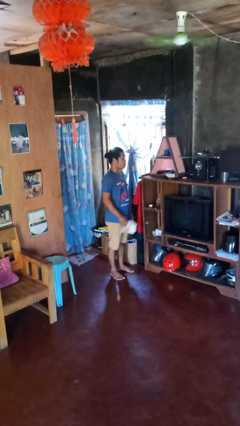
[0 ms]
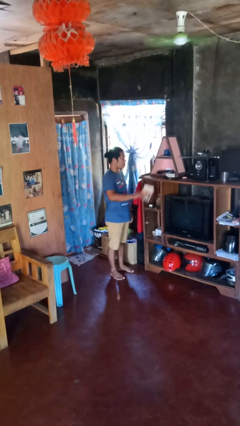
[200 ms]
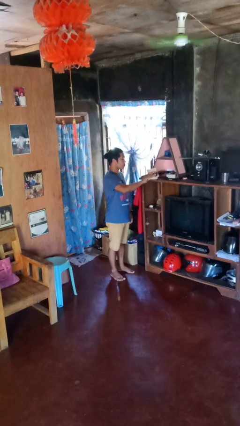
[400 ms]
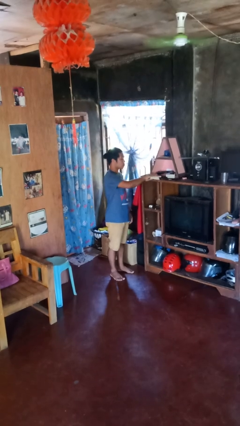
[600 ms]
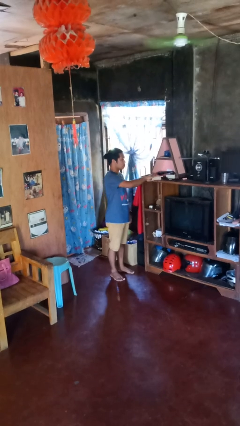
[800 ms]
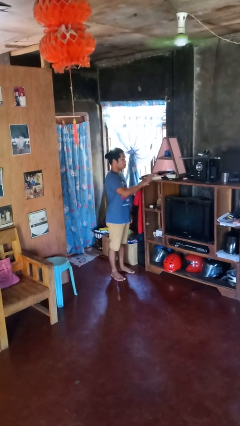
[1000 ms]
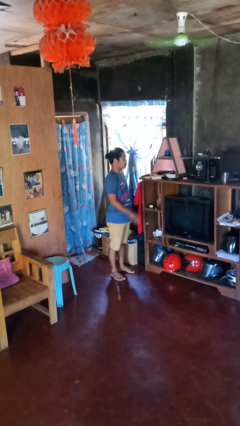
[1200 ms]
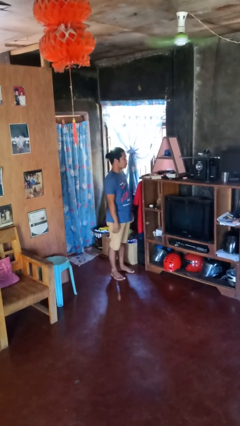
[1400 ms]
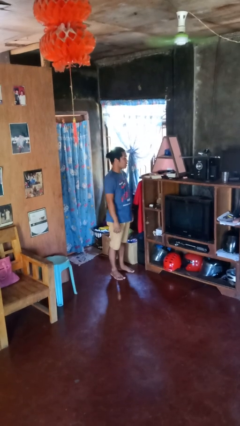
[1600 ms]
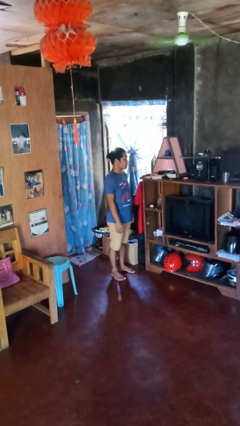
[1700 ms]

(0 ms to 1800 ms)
person puts down object on shelf

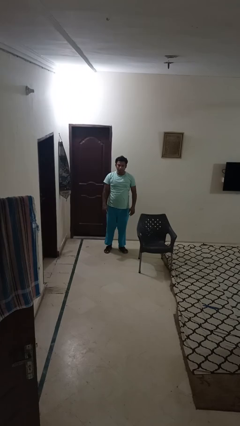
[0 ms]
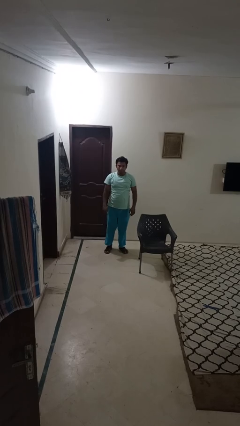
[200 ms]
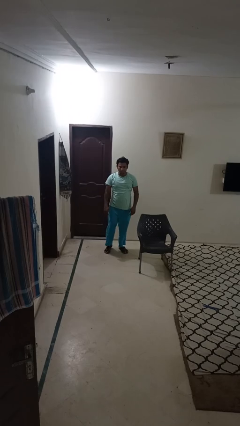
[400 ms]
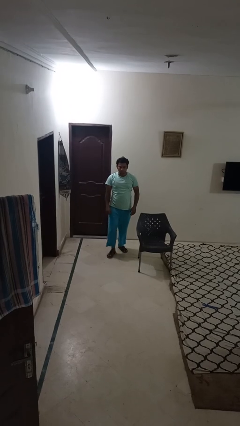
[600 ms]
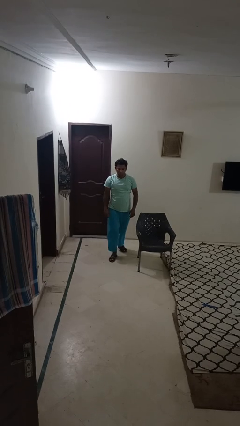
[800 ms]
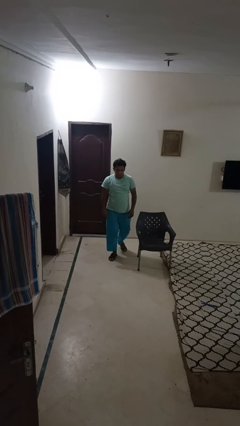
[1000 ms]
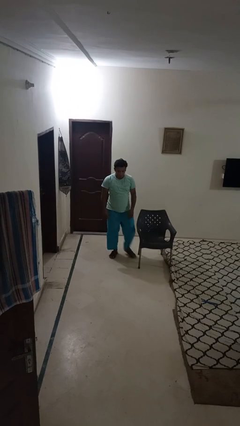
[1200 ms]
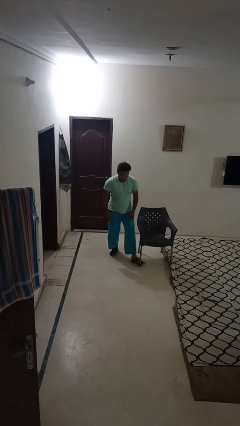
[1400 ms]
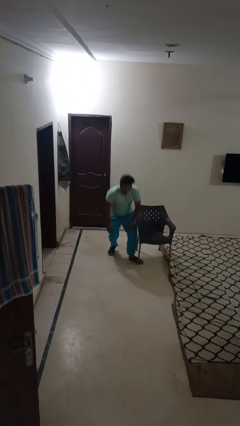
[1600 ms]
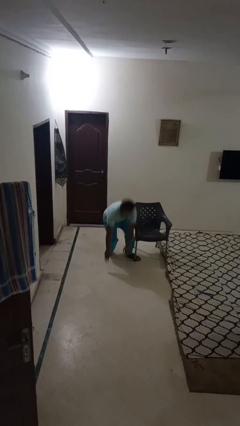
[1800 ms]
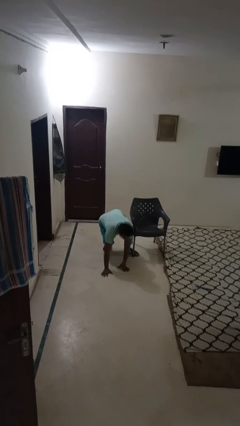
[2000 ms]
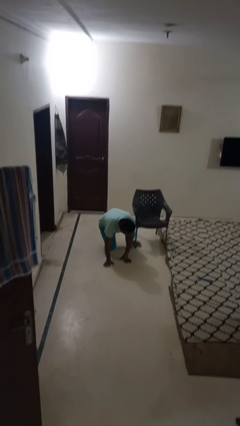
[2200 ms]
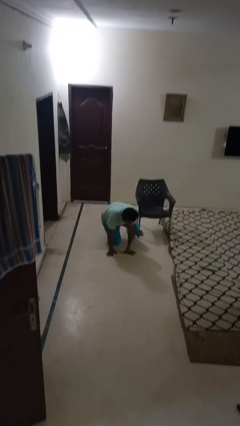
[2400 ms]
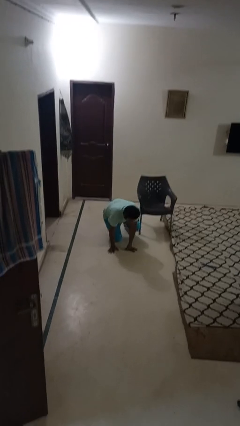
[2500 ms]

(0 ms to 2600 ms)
person trips on object on floor

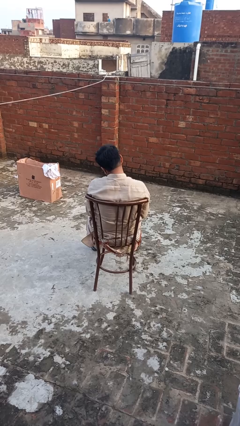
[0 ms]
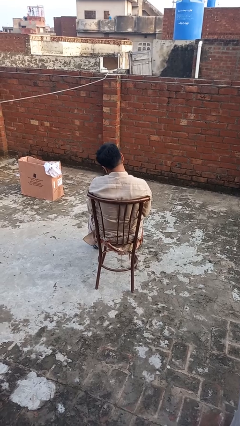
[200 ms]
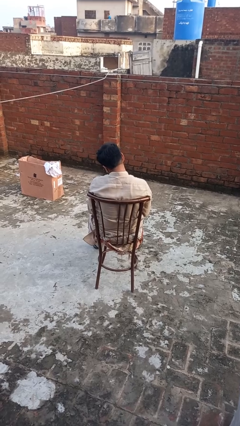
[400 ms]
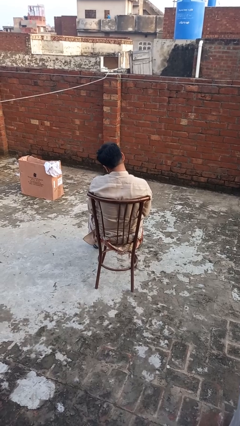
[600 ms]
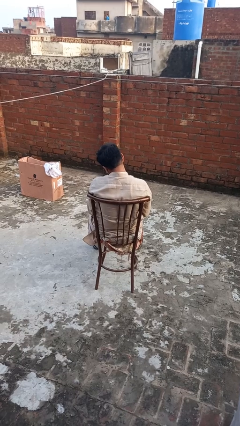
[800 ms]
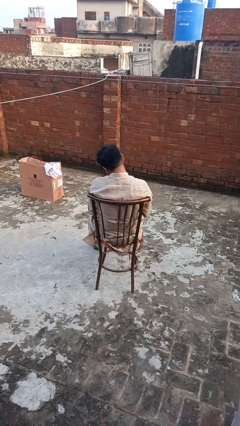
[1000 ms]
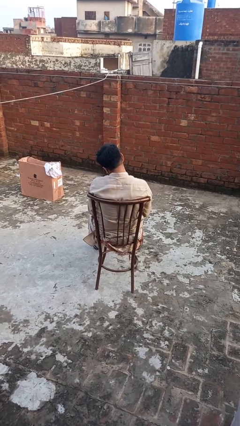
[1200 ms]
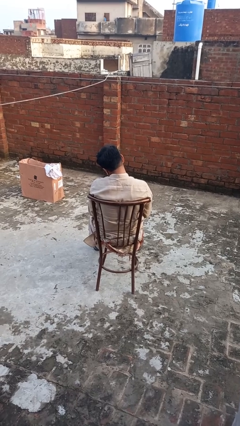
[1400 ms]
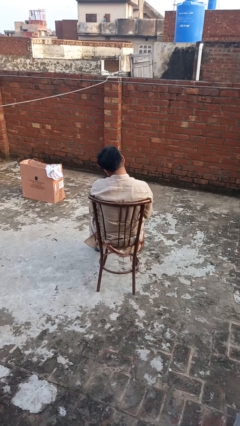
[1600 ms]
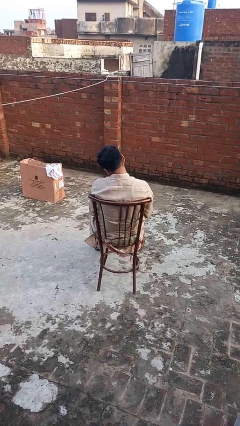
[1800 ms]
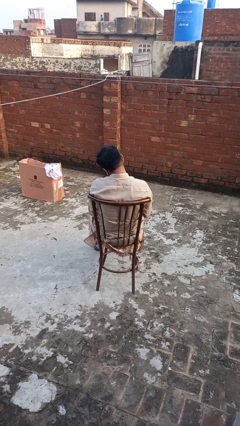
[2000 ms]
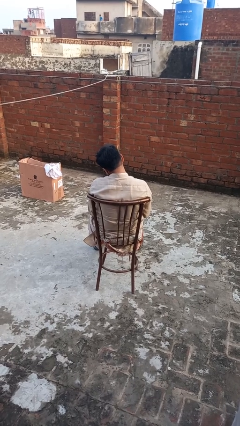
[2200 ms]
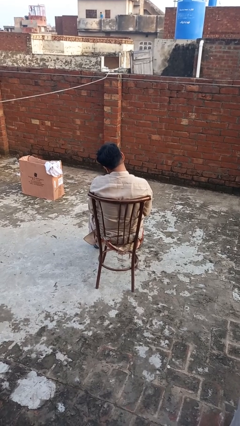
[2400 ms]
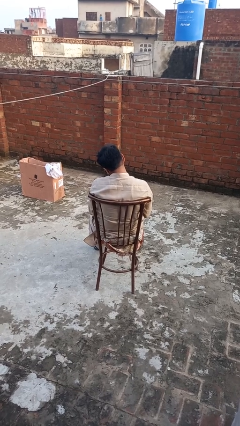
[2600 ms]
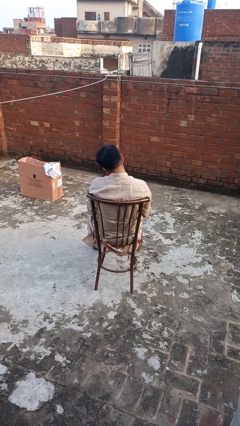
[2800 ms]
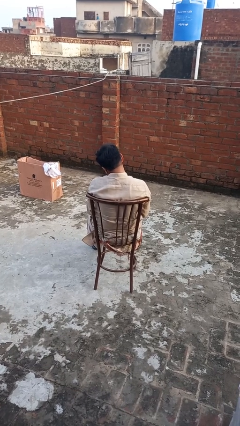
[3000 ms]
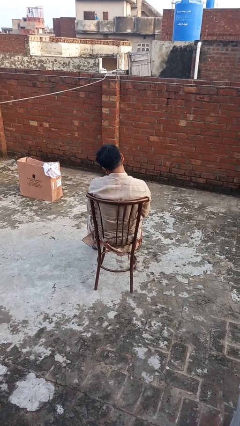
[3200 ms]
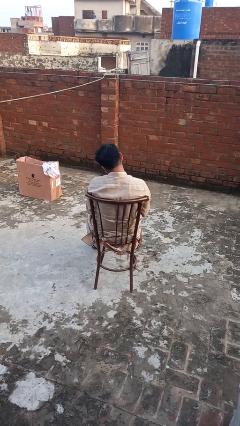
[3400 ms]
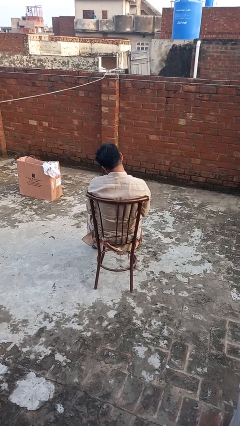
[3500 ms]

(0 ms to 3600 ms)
person stirs mug

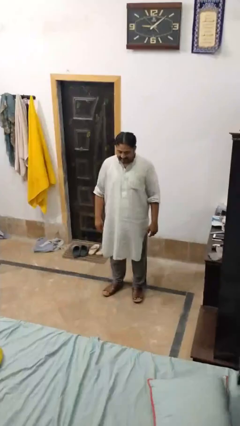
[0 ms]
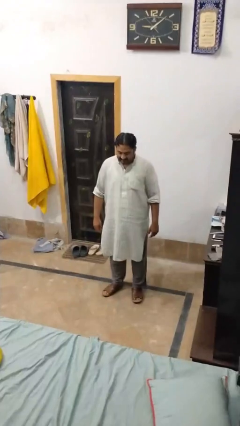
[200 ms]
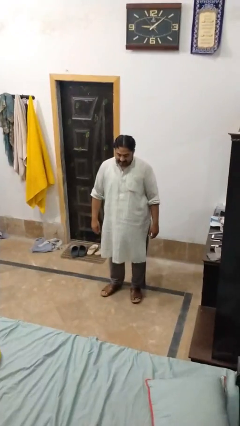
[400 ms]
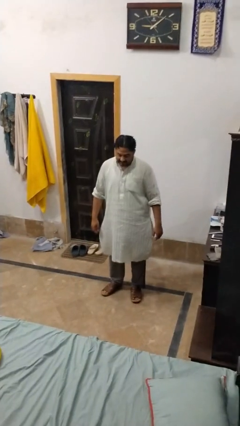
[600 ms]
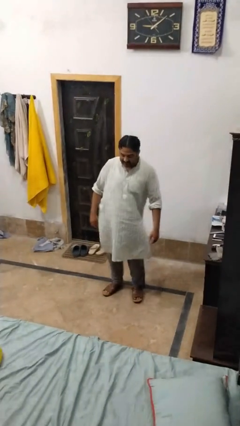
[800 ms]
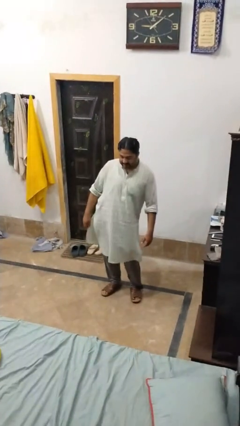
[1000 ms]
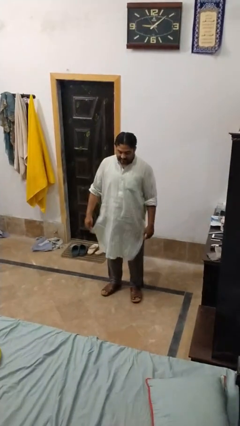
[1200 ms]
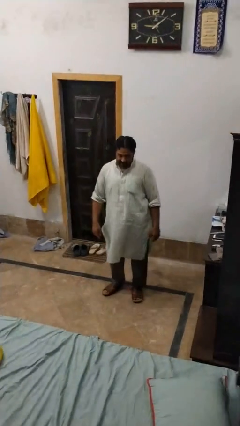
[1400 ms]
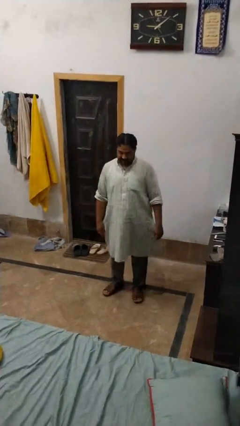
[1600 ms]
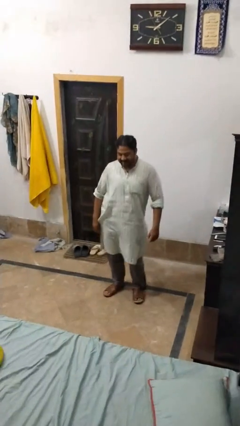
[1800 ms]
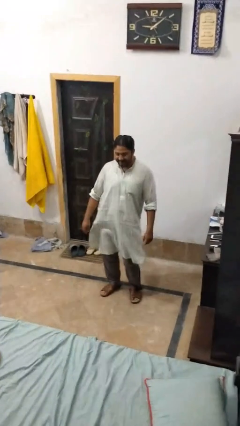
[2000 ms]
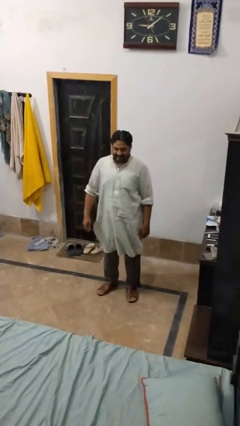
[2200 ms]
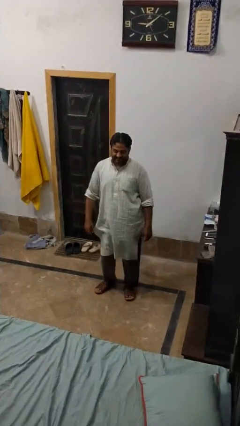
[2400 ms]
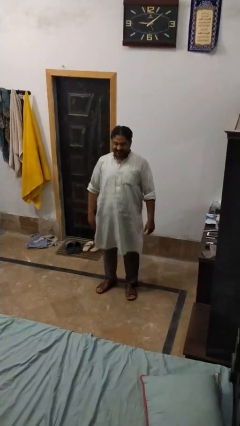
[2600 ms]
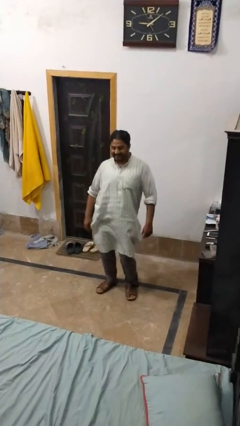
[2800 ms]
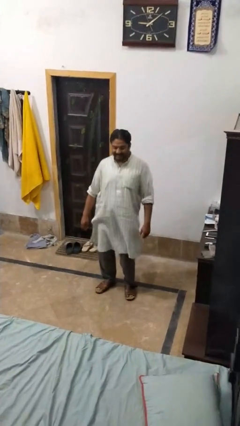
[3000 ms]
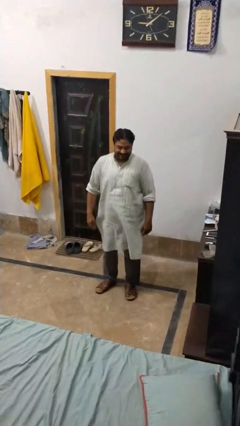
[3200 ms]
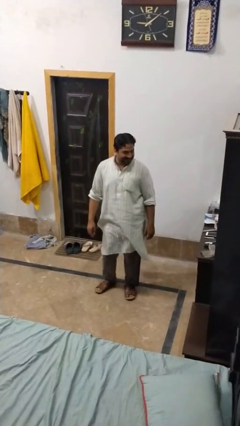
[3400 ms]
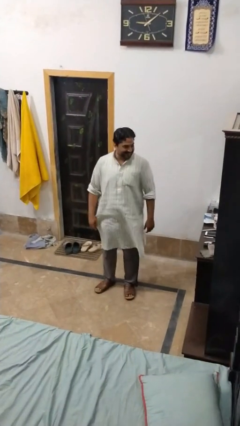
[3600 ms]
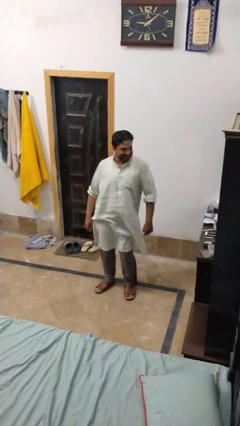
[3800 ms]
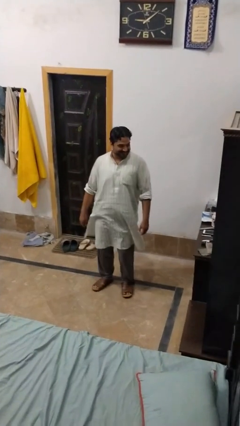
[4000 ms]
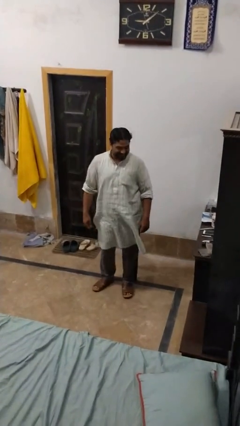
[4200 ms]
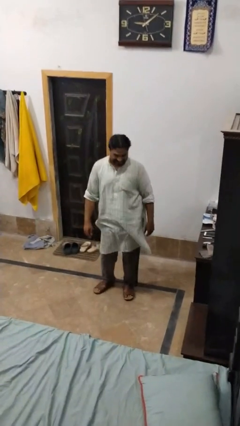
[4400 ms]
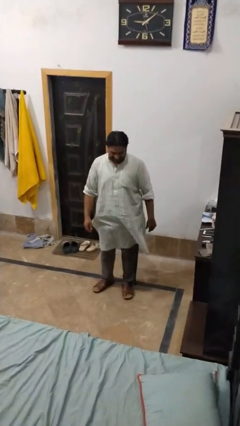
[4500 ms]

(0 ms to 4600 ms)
person wiggles hips

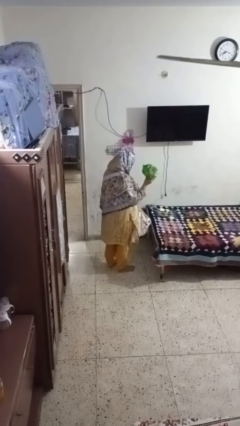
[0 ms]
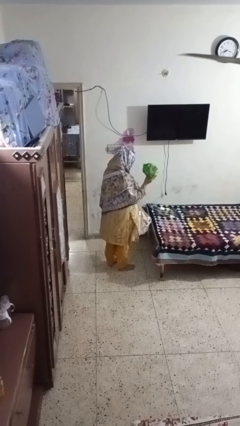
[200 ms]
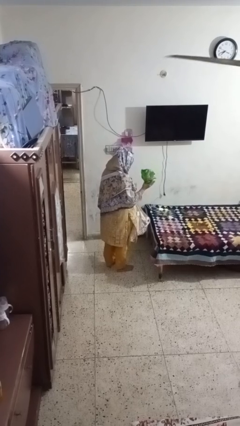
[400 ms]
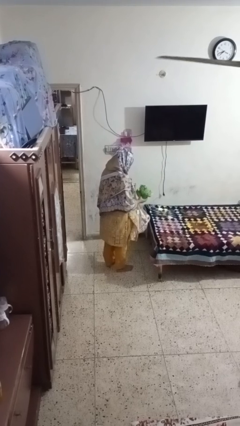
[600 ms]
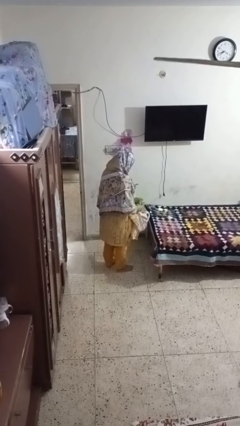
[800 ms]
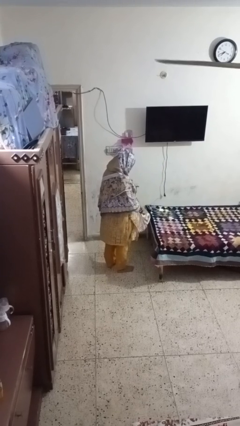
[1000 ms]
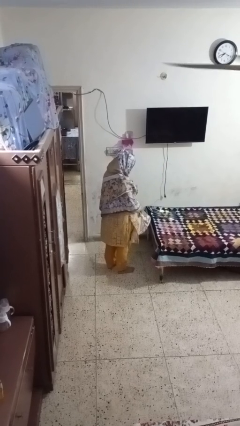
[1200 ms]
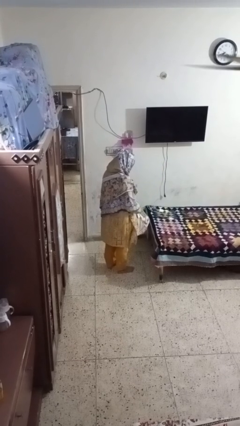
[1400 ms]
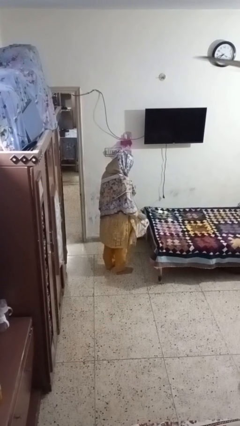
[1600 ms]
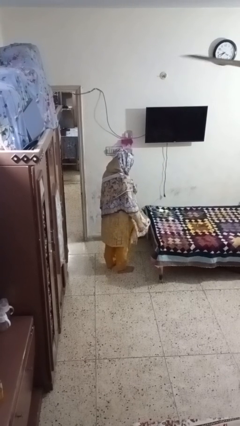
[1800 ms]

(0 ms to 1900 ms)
person puts object into bag

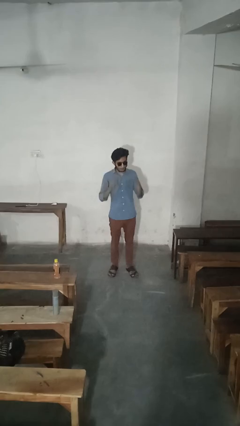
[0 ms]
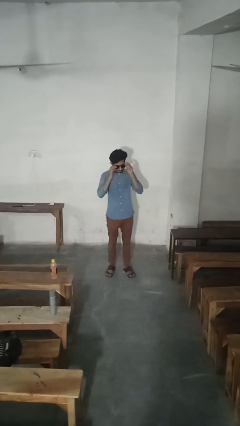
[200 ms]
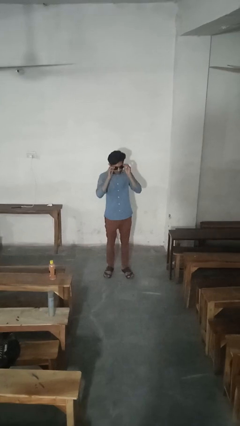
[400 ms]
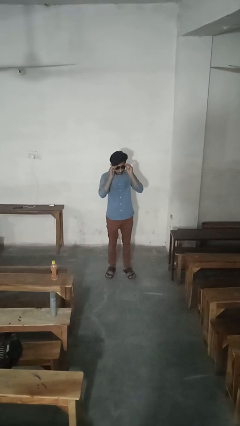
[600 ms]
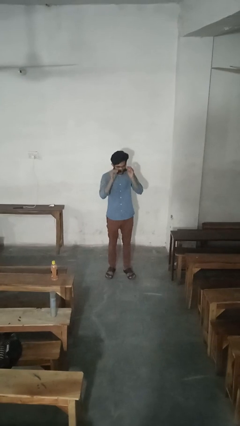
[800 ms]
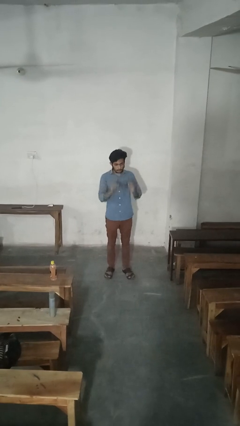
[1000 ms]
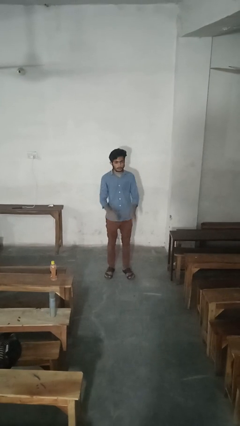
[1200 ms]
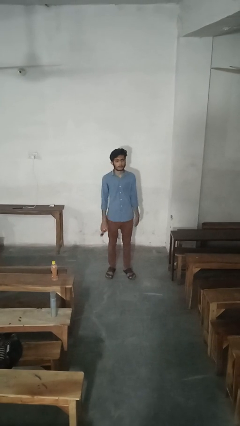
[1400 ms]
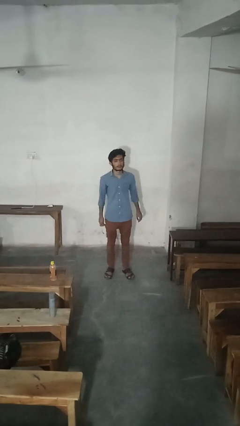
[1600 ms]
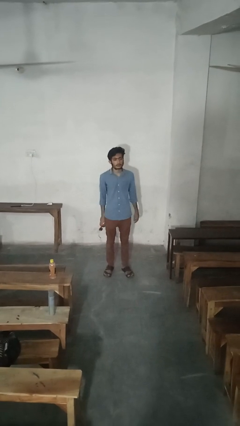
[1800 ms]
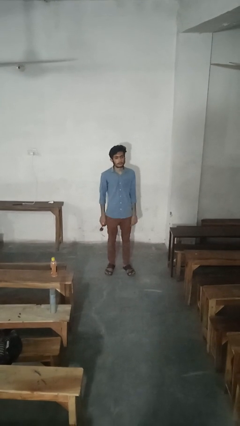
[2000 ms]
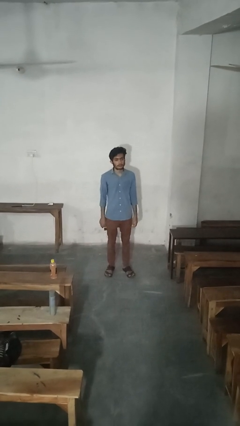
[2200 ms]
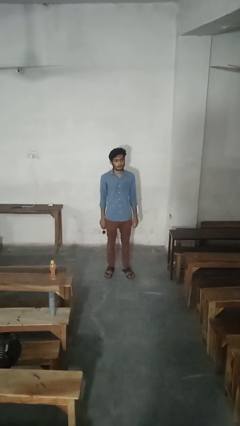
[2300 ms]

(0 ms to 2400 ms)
person takes off sunglasses

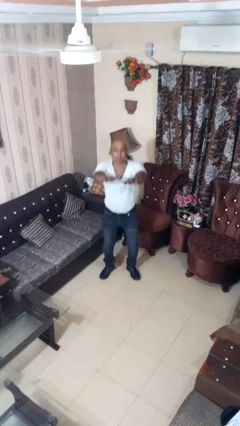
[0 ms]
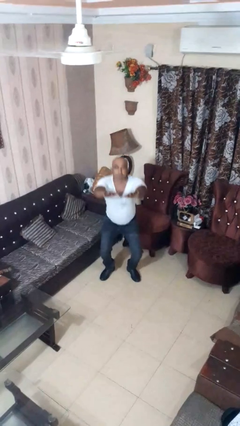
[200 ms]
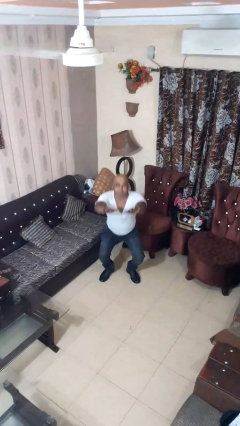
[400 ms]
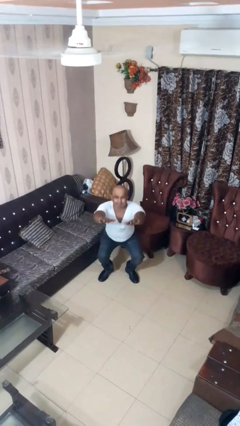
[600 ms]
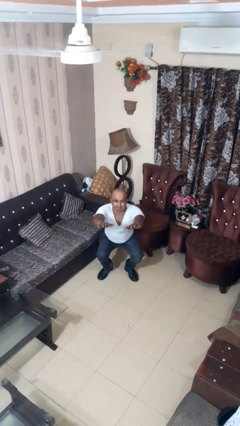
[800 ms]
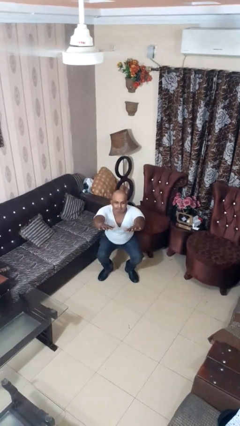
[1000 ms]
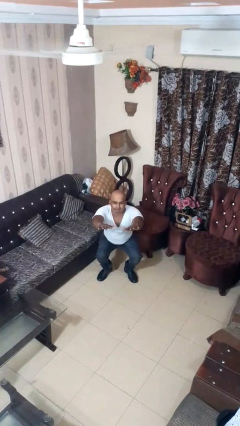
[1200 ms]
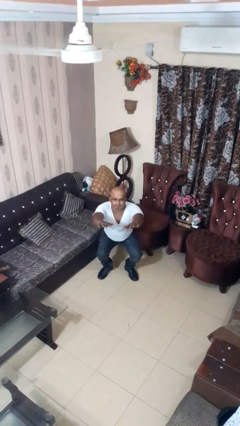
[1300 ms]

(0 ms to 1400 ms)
person squats
